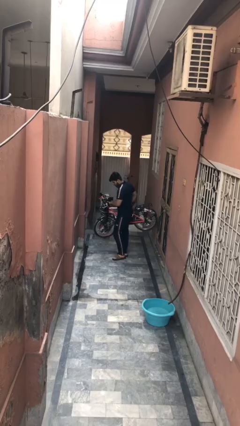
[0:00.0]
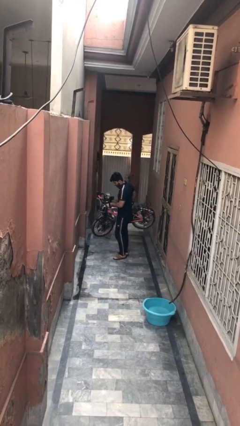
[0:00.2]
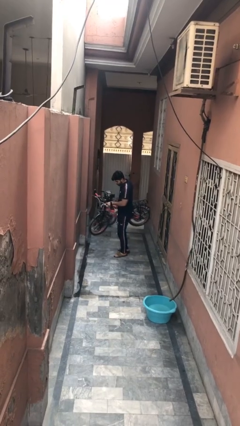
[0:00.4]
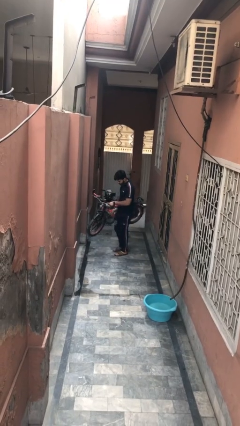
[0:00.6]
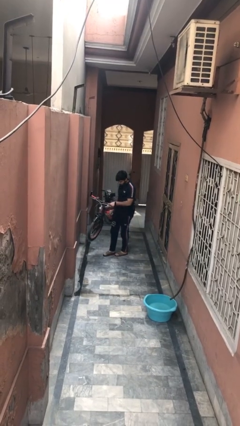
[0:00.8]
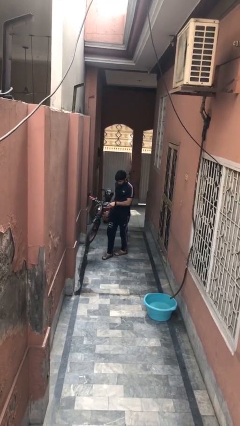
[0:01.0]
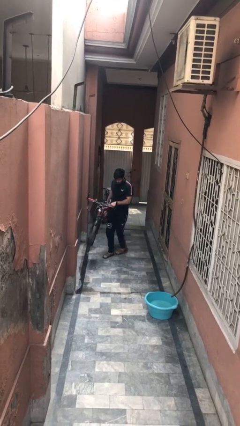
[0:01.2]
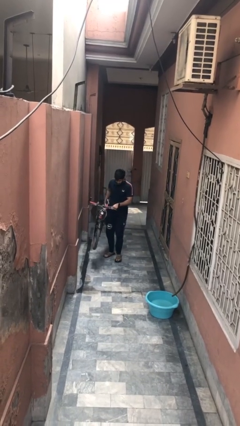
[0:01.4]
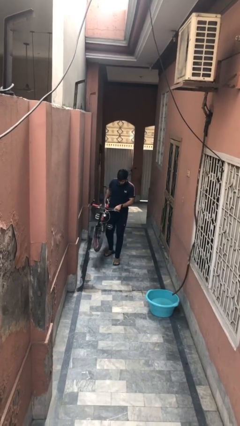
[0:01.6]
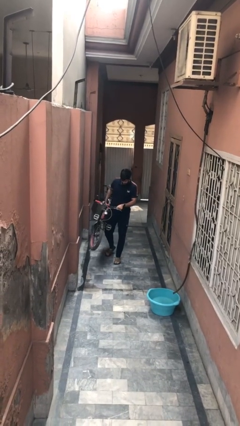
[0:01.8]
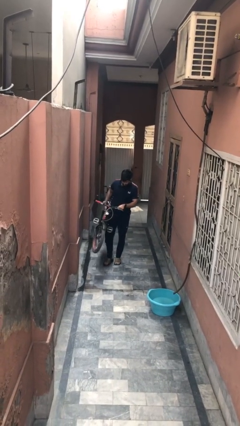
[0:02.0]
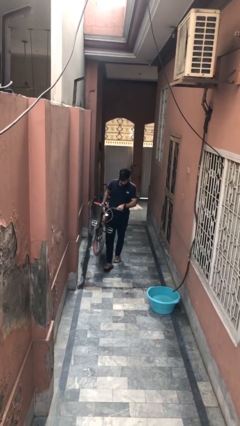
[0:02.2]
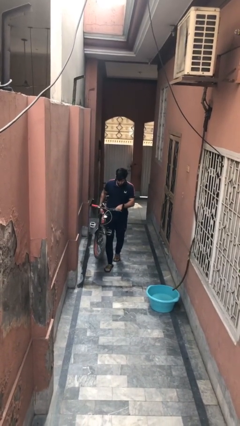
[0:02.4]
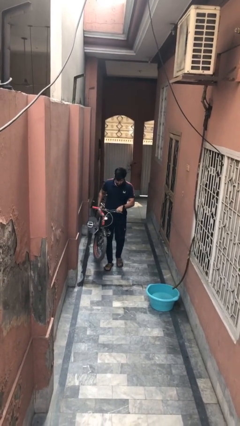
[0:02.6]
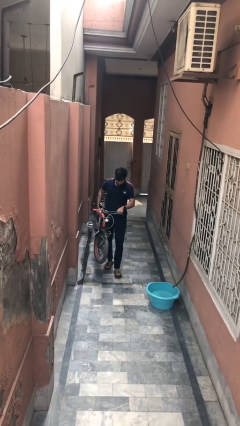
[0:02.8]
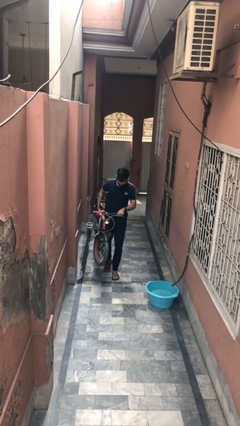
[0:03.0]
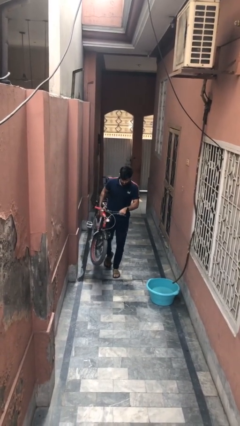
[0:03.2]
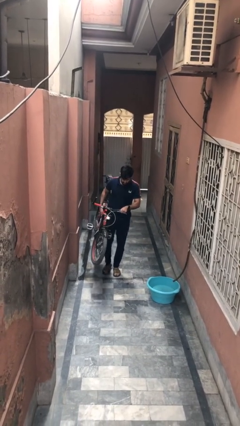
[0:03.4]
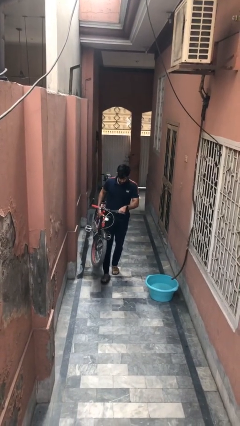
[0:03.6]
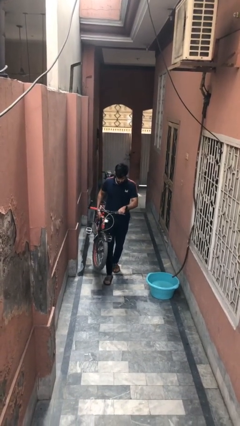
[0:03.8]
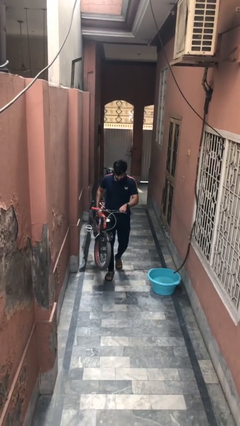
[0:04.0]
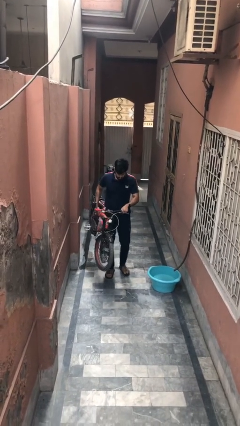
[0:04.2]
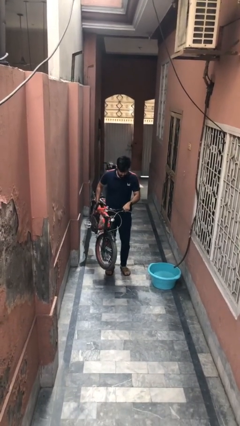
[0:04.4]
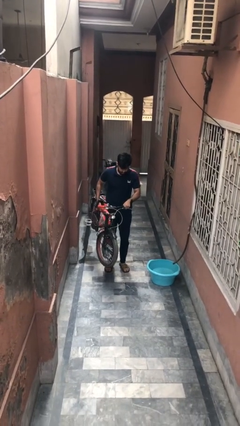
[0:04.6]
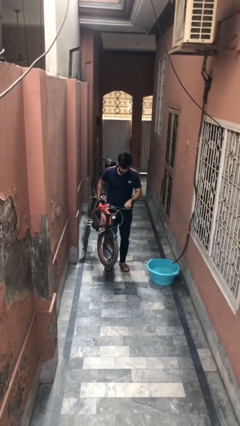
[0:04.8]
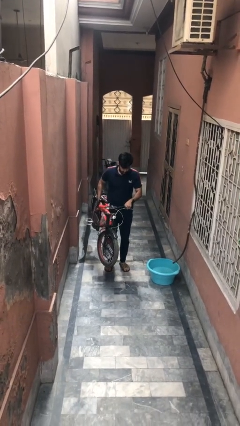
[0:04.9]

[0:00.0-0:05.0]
person carries bicycle

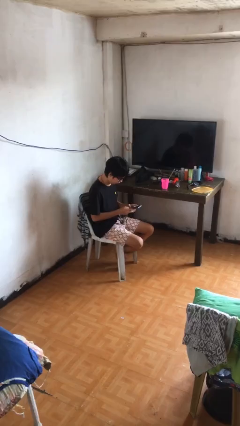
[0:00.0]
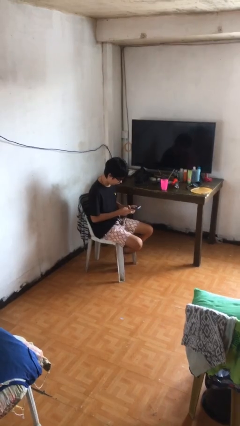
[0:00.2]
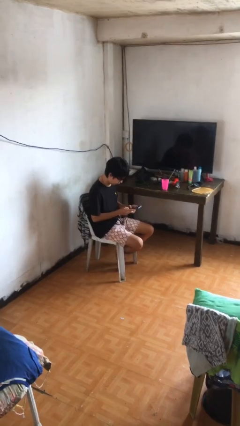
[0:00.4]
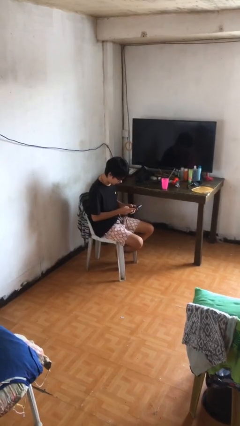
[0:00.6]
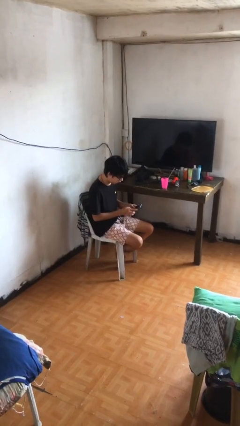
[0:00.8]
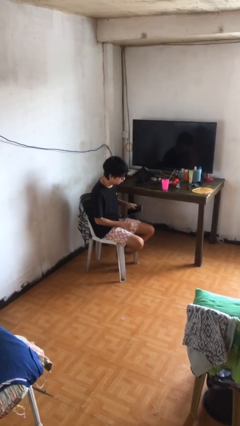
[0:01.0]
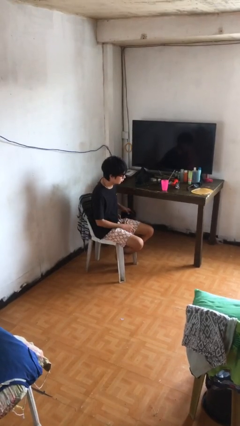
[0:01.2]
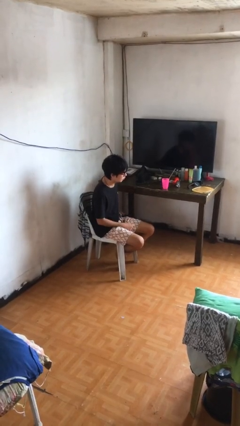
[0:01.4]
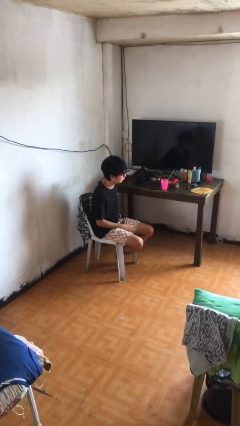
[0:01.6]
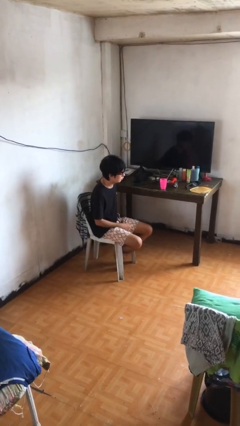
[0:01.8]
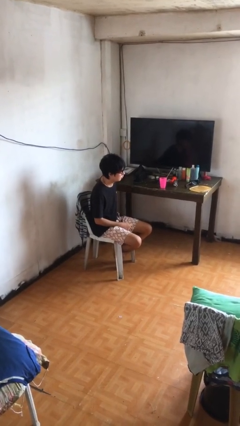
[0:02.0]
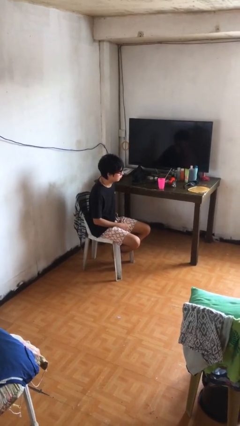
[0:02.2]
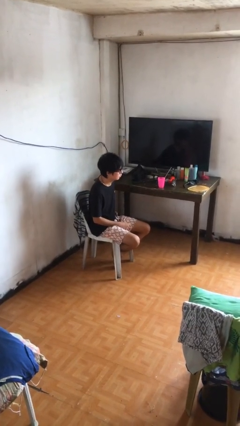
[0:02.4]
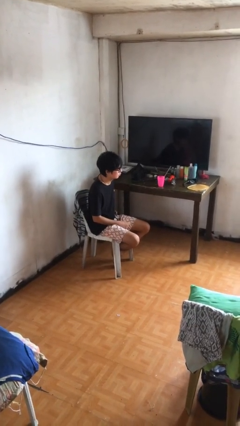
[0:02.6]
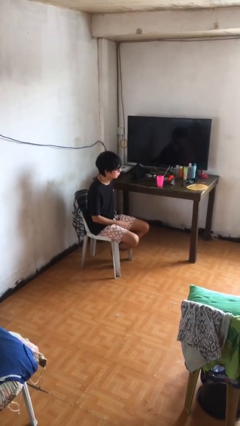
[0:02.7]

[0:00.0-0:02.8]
person puts phone into pocket

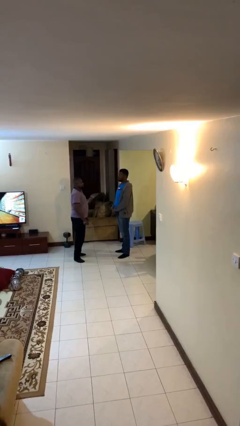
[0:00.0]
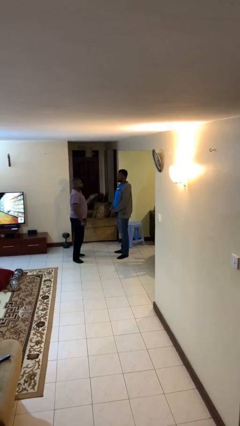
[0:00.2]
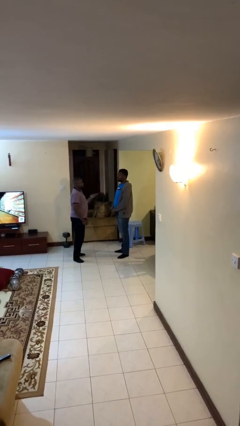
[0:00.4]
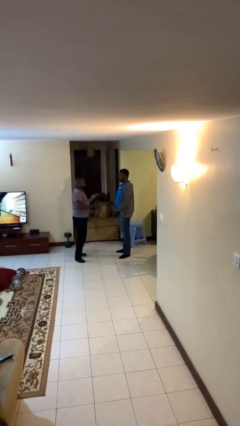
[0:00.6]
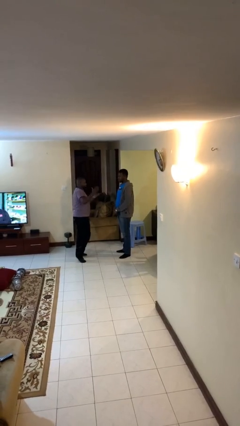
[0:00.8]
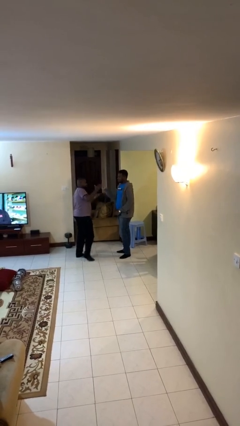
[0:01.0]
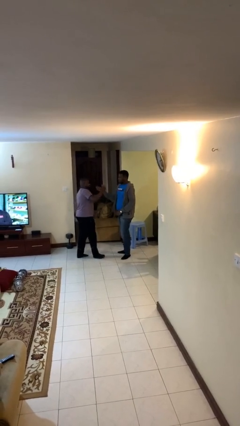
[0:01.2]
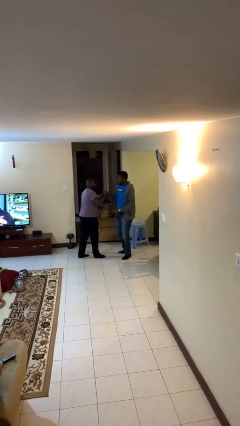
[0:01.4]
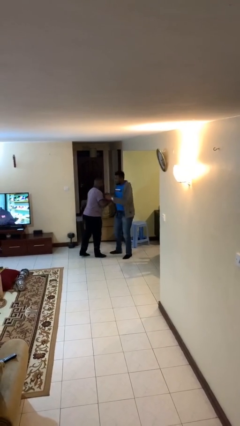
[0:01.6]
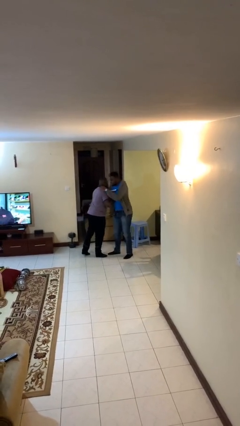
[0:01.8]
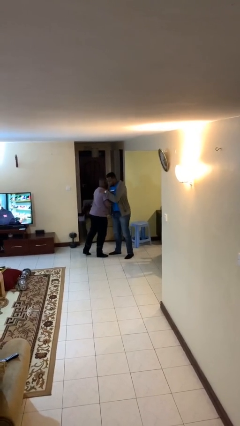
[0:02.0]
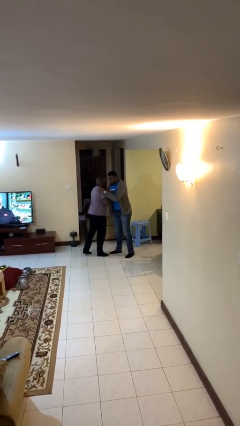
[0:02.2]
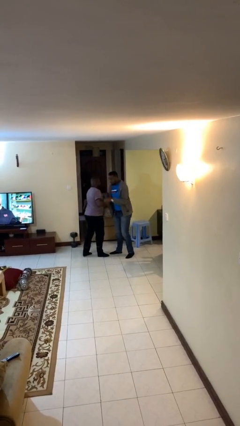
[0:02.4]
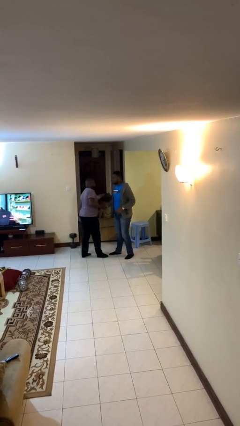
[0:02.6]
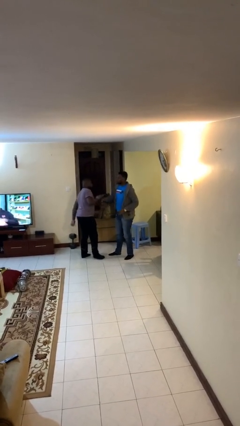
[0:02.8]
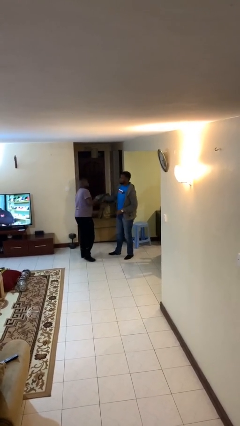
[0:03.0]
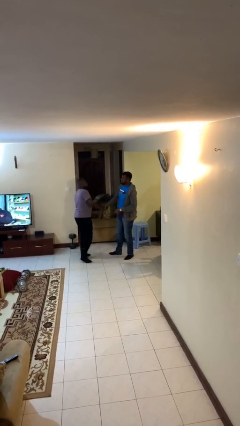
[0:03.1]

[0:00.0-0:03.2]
person embraces person

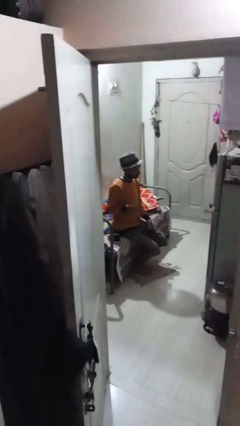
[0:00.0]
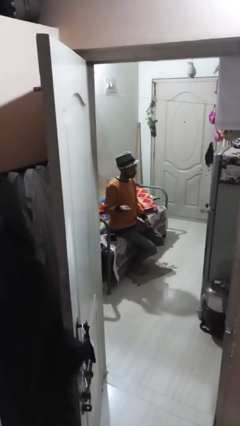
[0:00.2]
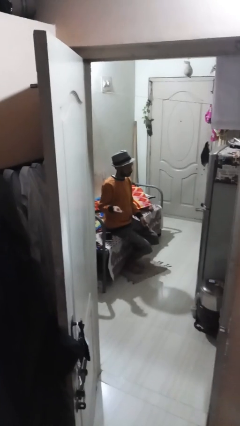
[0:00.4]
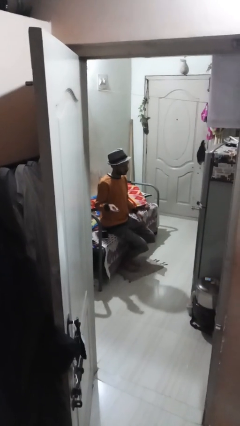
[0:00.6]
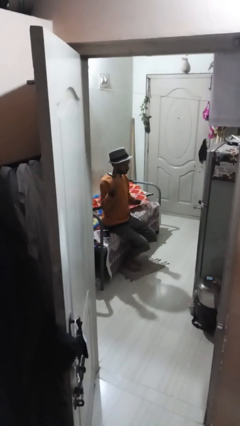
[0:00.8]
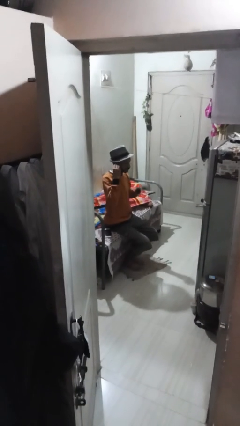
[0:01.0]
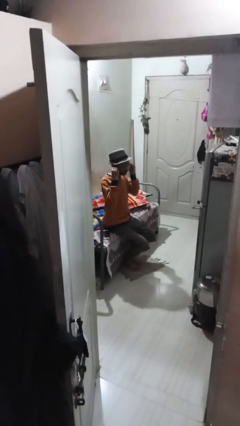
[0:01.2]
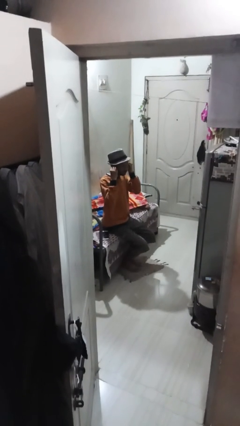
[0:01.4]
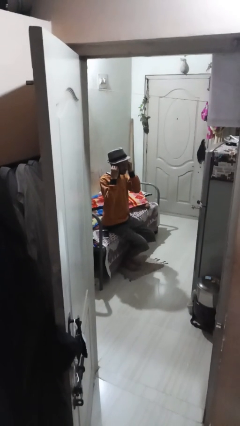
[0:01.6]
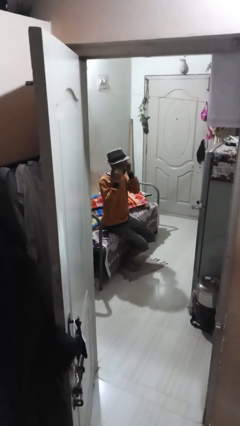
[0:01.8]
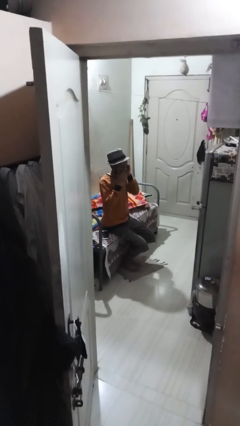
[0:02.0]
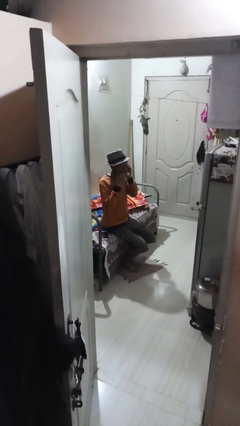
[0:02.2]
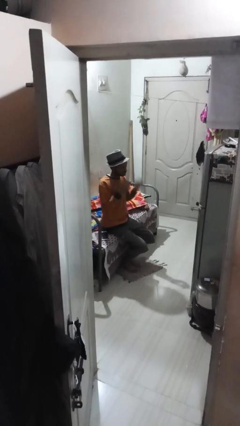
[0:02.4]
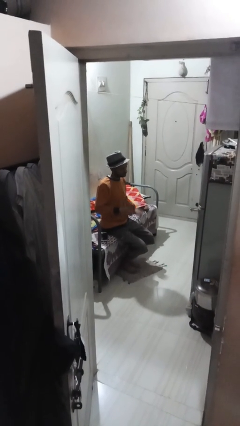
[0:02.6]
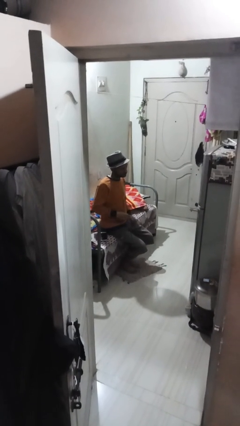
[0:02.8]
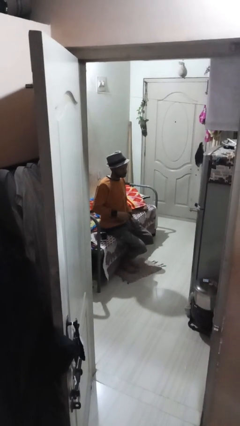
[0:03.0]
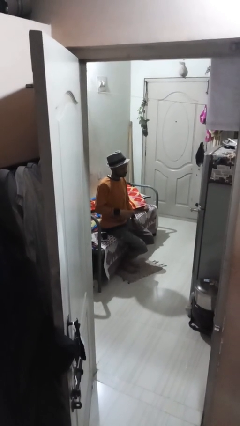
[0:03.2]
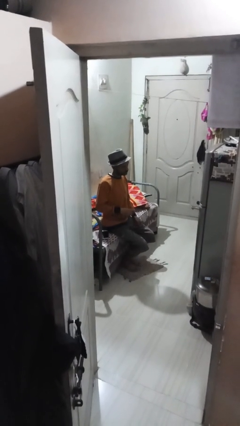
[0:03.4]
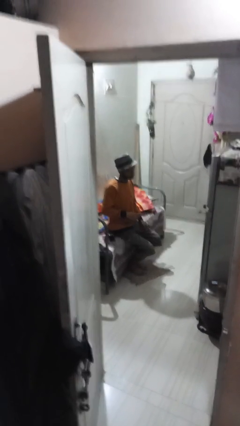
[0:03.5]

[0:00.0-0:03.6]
person puts on headphones

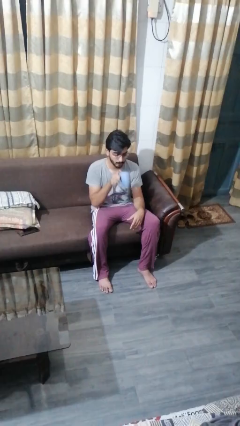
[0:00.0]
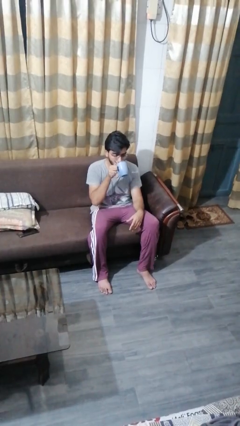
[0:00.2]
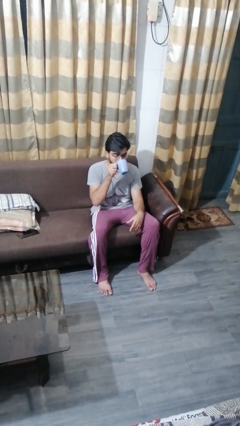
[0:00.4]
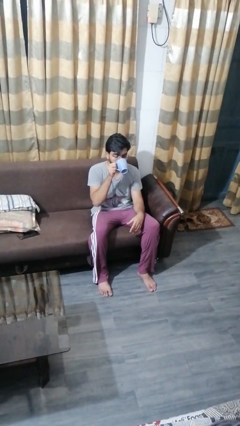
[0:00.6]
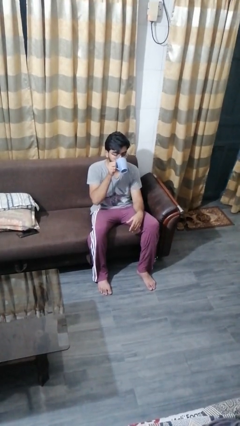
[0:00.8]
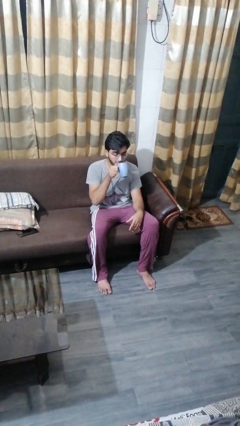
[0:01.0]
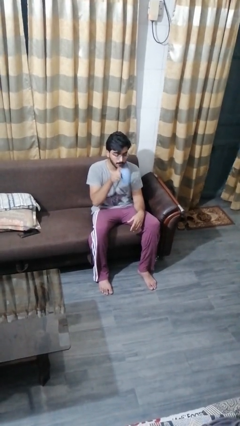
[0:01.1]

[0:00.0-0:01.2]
person drinks from mug

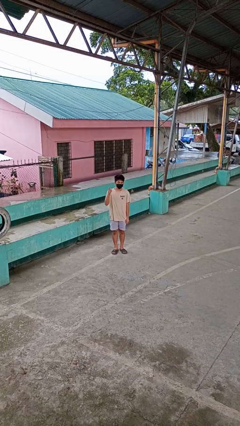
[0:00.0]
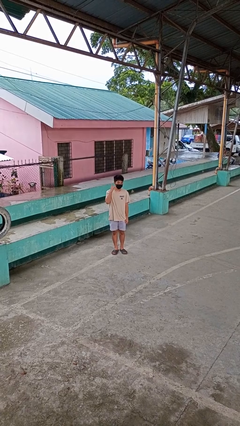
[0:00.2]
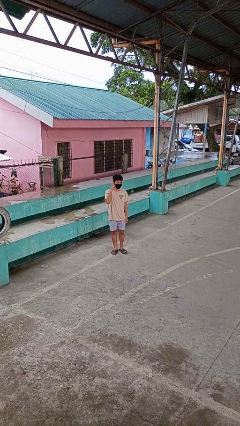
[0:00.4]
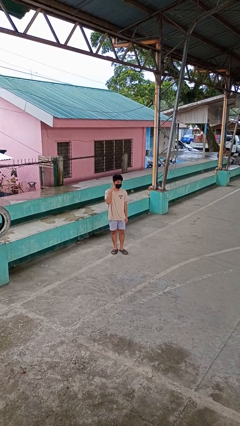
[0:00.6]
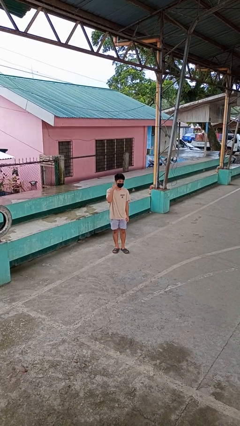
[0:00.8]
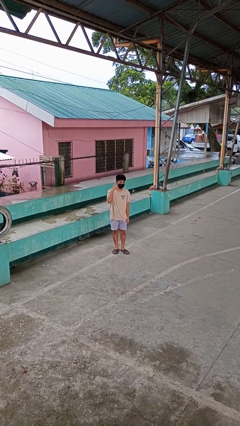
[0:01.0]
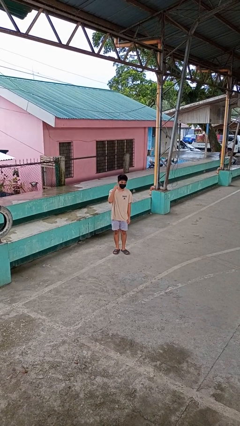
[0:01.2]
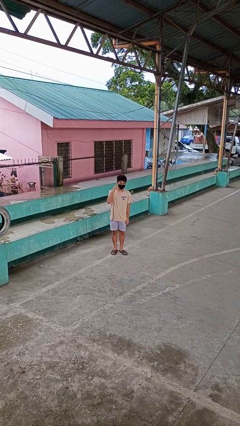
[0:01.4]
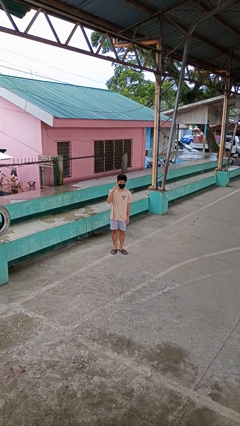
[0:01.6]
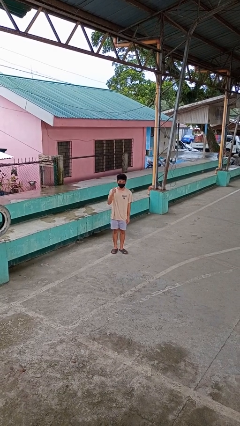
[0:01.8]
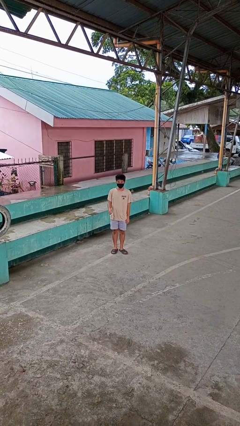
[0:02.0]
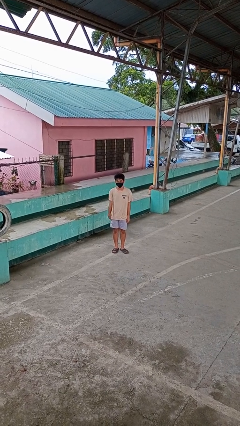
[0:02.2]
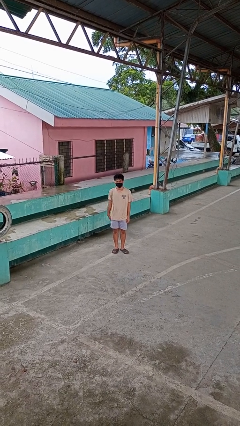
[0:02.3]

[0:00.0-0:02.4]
person gestures listen closely
